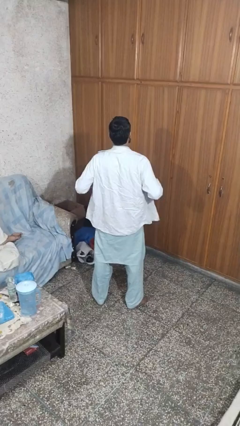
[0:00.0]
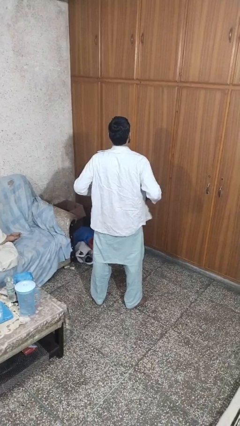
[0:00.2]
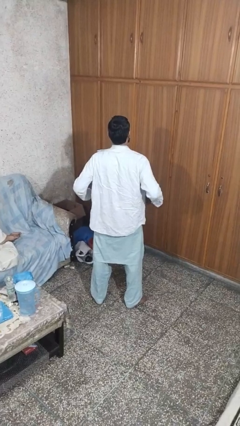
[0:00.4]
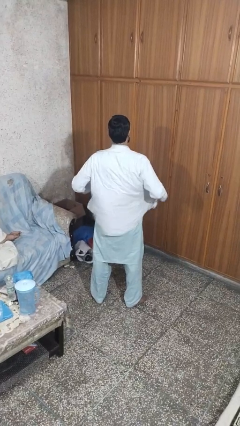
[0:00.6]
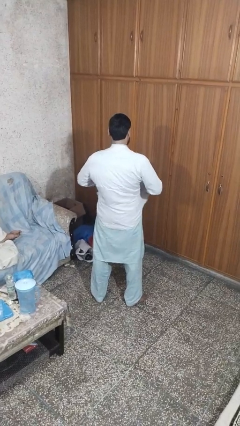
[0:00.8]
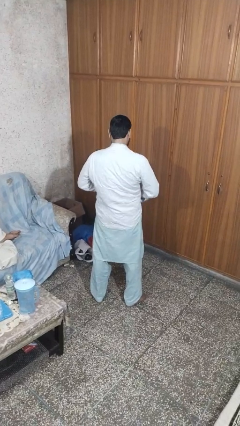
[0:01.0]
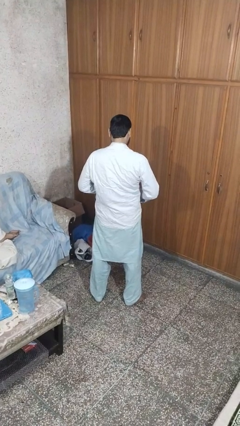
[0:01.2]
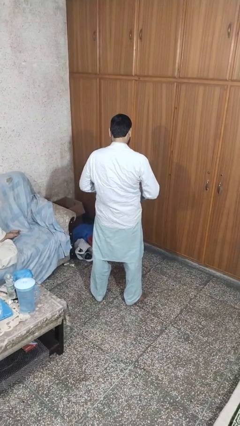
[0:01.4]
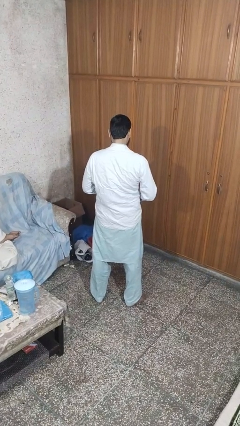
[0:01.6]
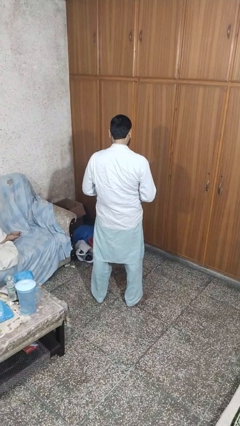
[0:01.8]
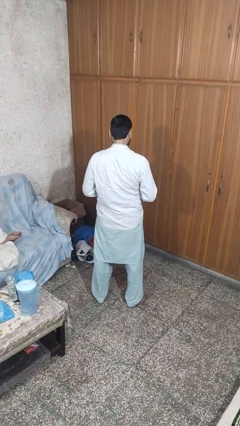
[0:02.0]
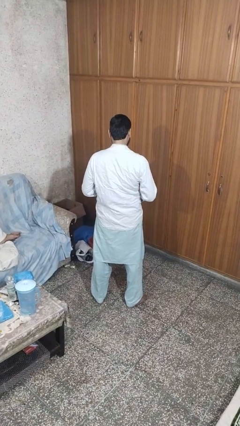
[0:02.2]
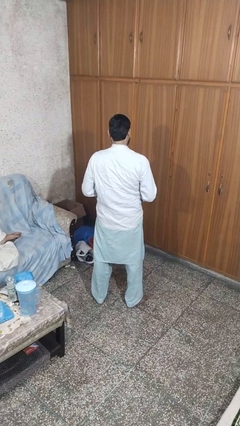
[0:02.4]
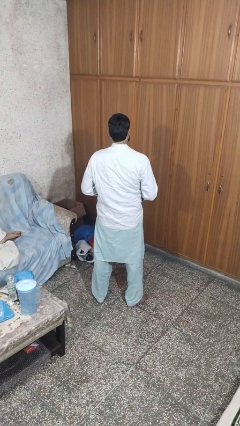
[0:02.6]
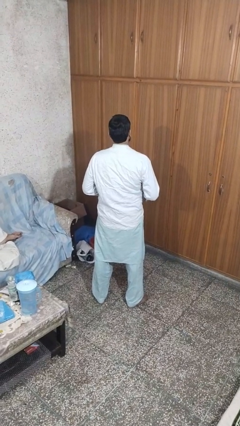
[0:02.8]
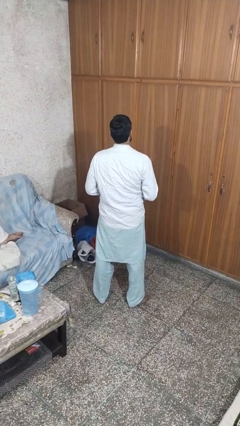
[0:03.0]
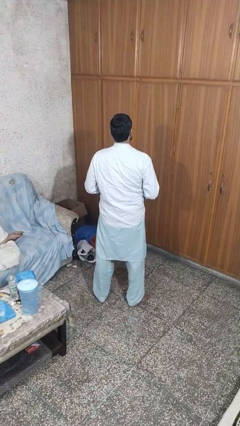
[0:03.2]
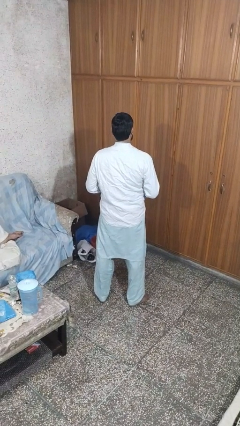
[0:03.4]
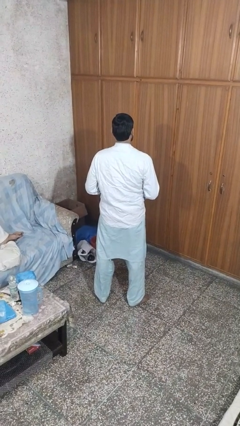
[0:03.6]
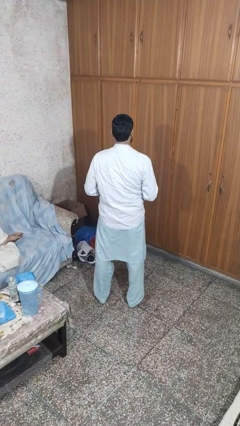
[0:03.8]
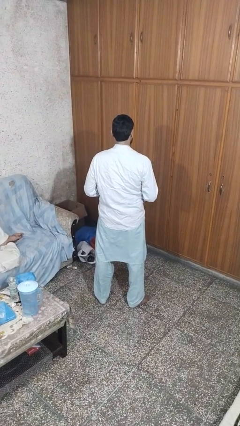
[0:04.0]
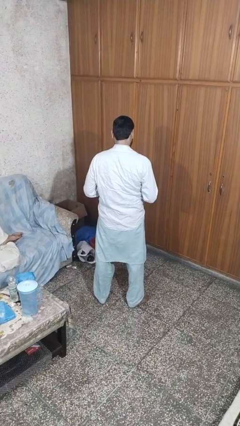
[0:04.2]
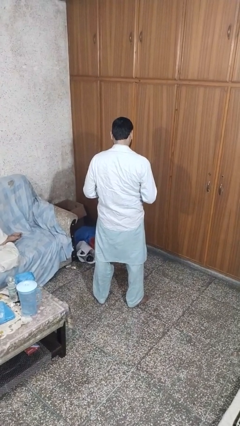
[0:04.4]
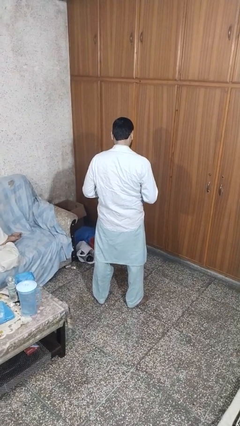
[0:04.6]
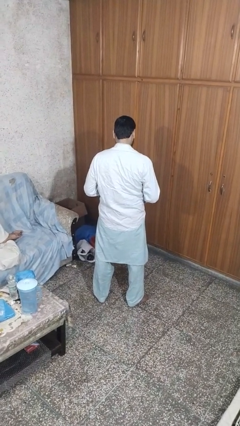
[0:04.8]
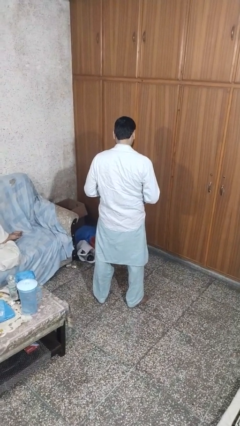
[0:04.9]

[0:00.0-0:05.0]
person buttons shirt

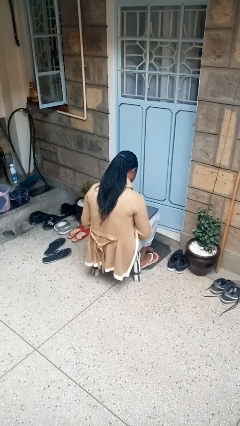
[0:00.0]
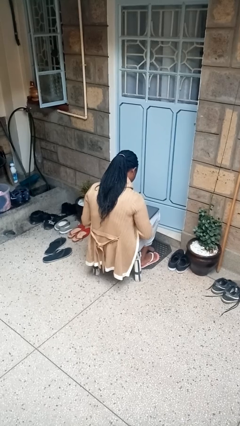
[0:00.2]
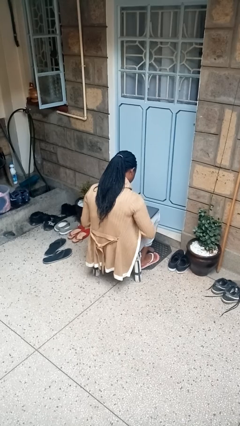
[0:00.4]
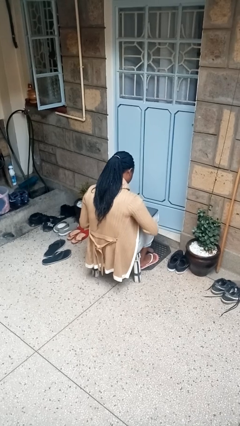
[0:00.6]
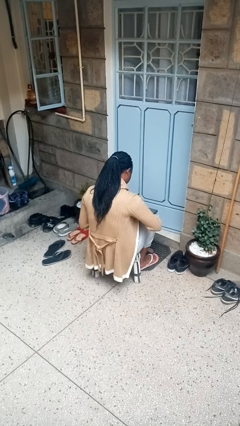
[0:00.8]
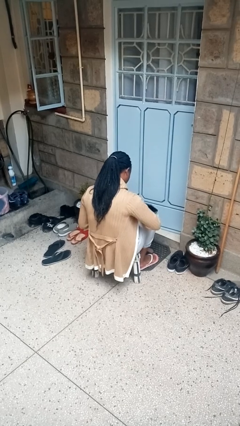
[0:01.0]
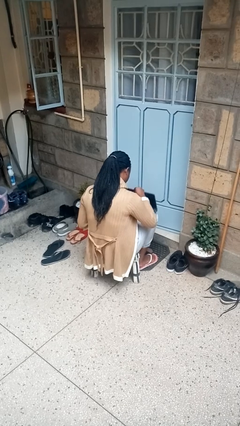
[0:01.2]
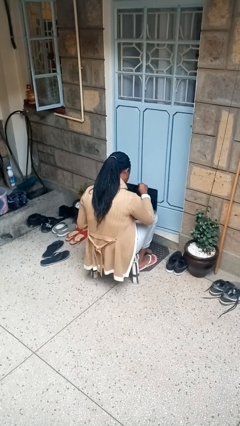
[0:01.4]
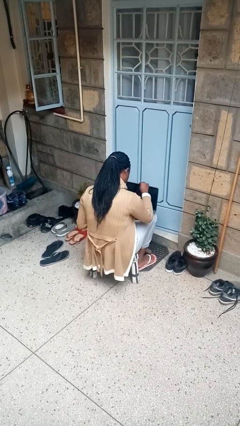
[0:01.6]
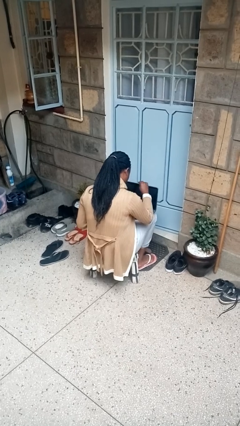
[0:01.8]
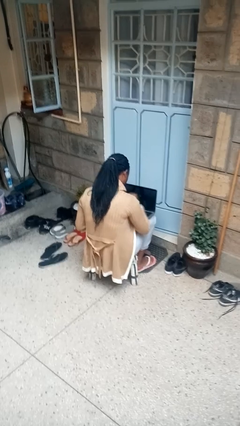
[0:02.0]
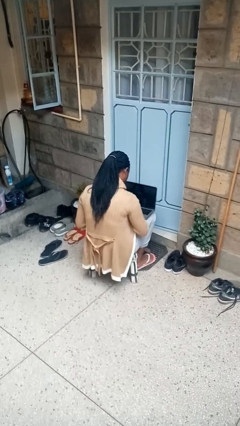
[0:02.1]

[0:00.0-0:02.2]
person opens laptop

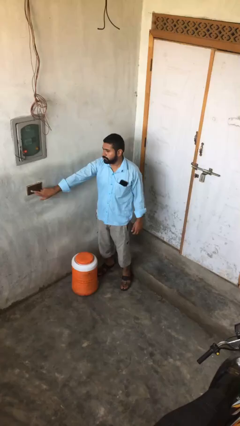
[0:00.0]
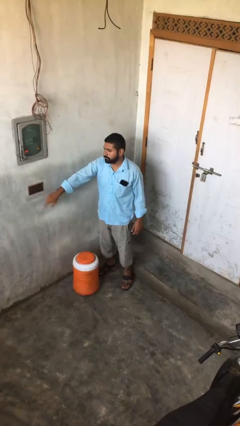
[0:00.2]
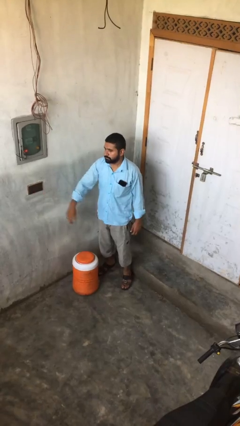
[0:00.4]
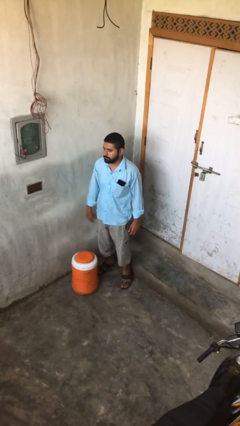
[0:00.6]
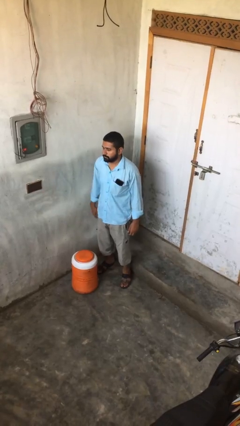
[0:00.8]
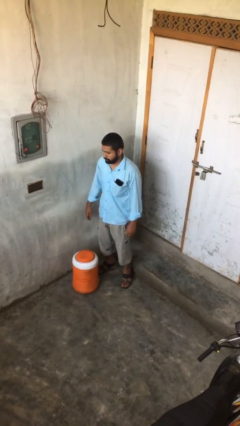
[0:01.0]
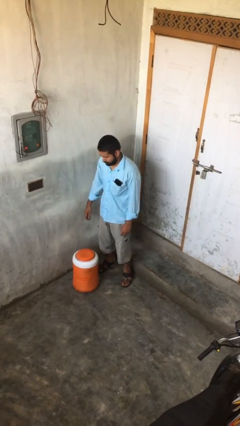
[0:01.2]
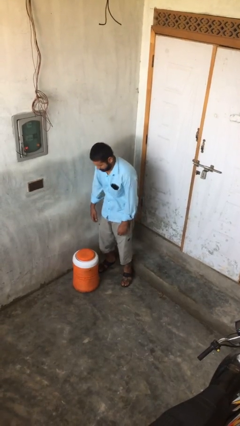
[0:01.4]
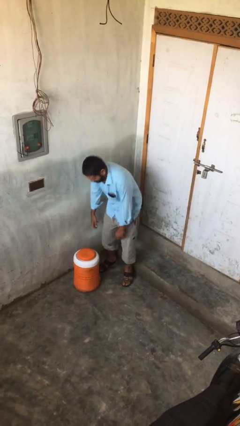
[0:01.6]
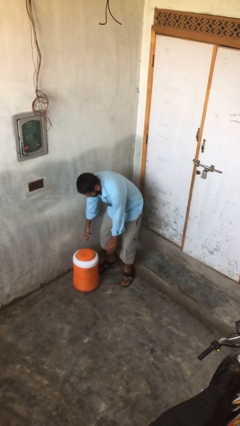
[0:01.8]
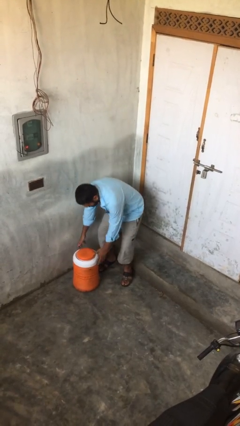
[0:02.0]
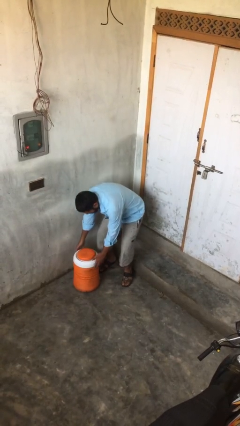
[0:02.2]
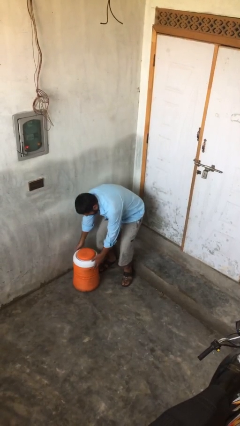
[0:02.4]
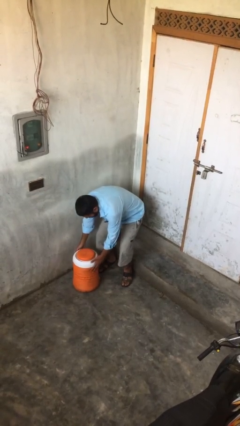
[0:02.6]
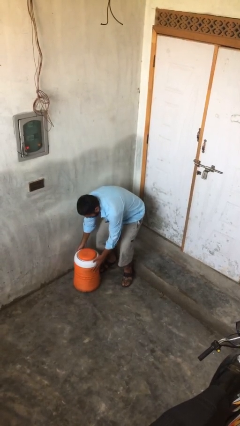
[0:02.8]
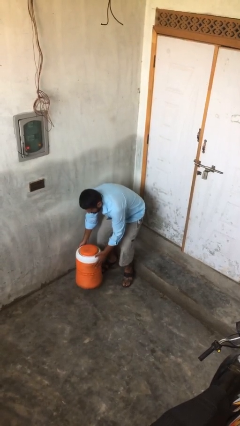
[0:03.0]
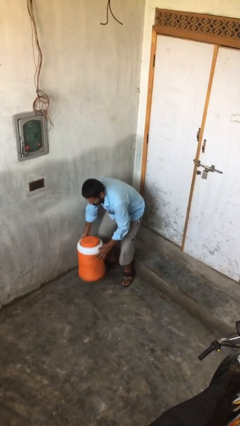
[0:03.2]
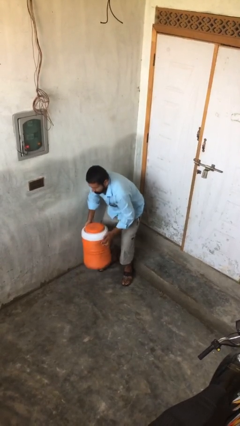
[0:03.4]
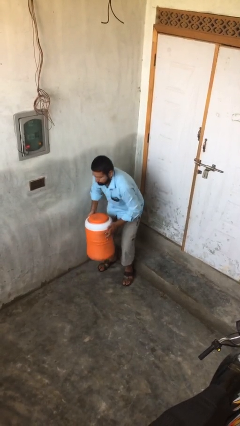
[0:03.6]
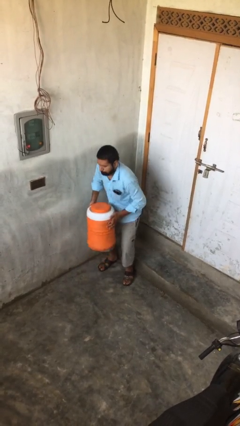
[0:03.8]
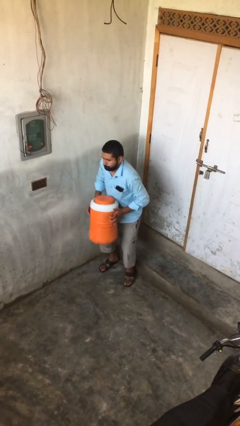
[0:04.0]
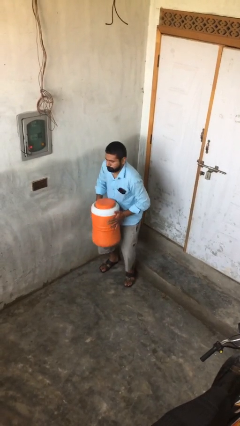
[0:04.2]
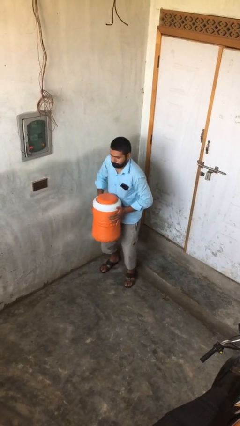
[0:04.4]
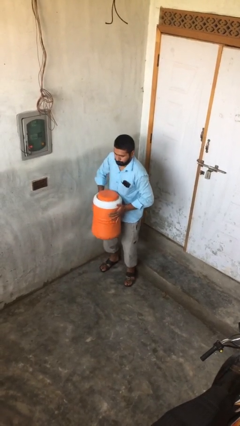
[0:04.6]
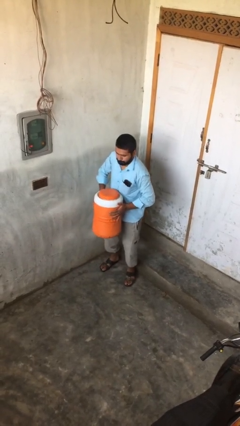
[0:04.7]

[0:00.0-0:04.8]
person picks up object from floor

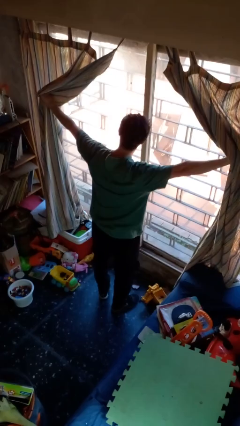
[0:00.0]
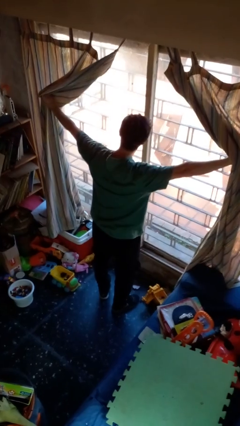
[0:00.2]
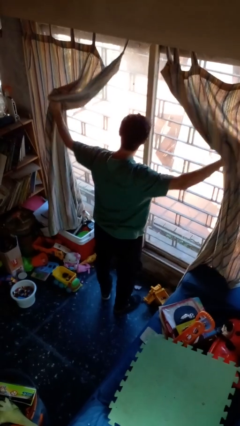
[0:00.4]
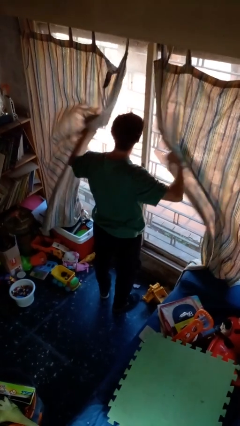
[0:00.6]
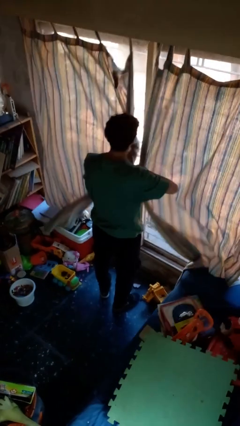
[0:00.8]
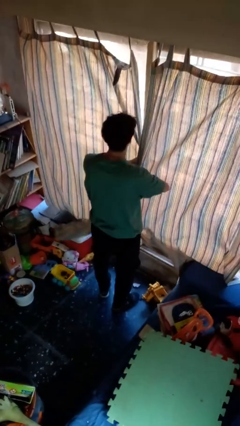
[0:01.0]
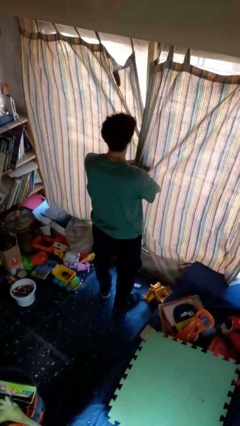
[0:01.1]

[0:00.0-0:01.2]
person closes curtains

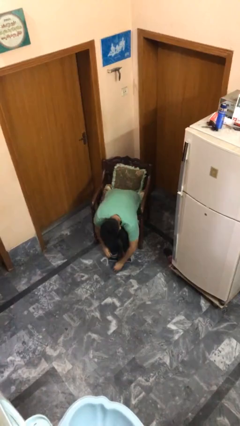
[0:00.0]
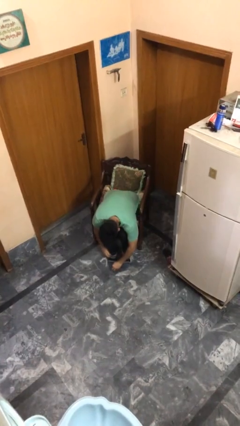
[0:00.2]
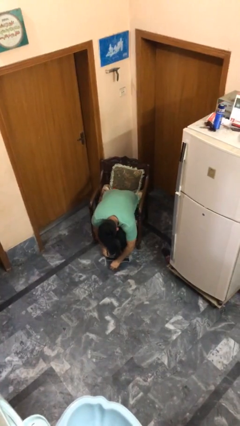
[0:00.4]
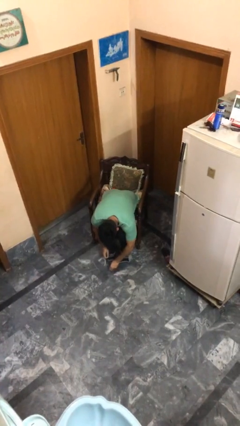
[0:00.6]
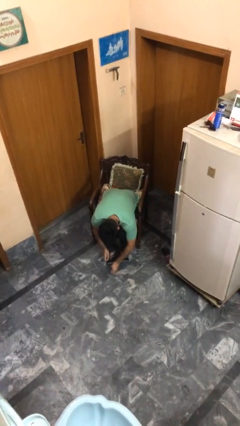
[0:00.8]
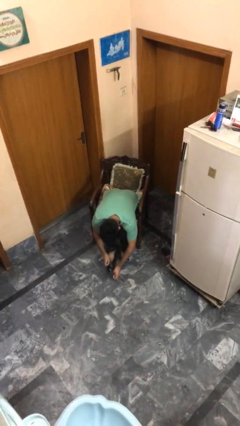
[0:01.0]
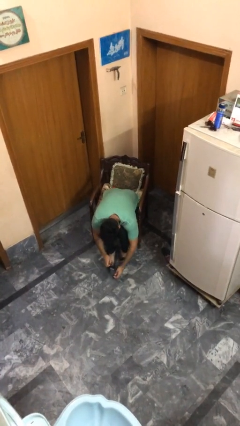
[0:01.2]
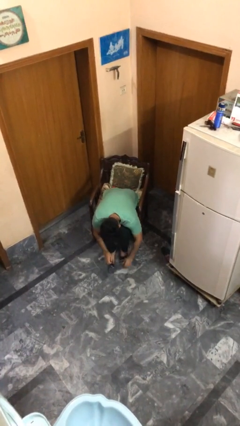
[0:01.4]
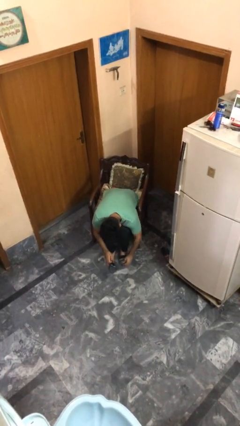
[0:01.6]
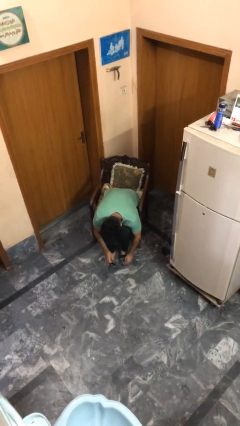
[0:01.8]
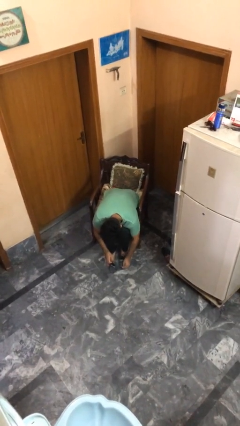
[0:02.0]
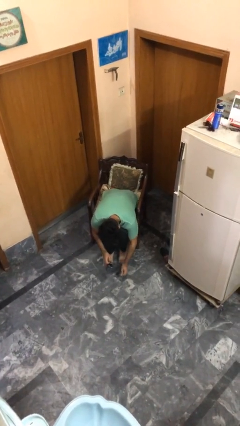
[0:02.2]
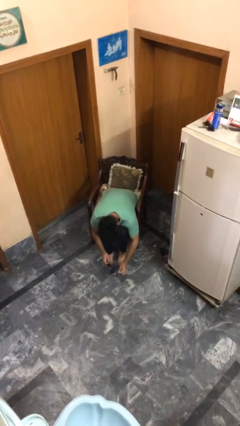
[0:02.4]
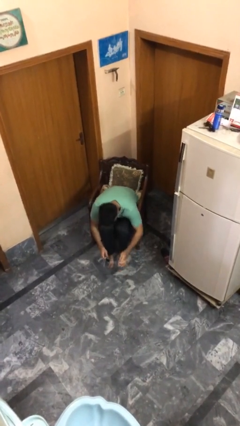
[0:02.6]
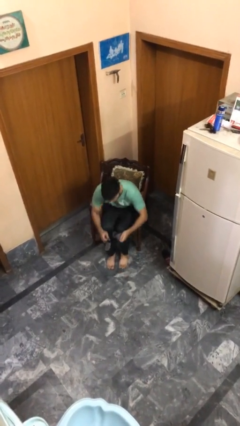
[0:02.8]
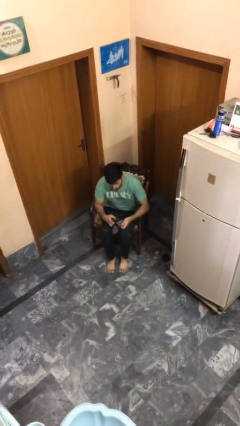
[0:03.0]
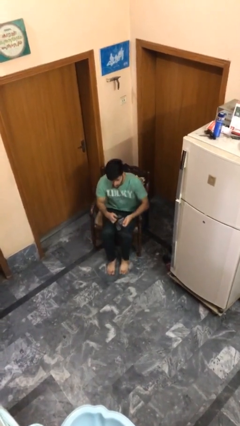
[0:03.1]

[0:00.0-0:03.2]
person takes off socks

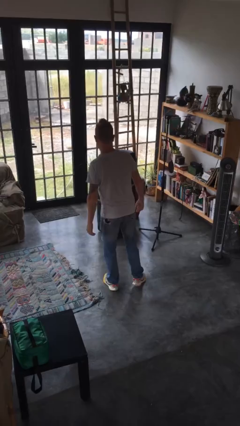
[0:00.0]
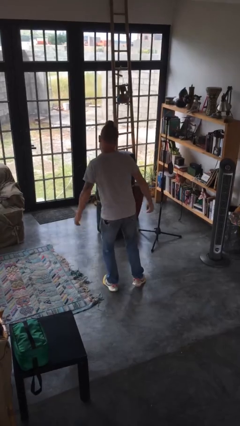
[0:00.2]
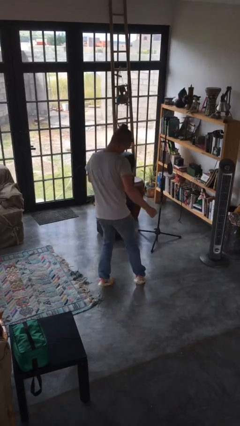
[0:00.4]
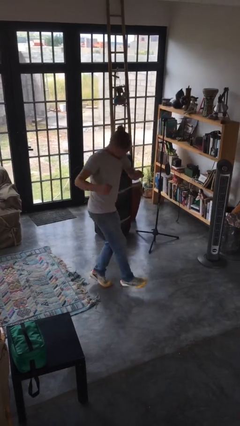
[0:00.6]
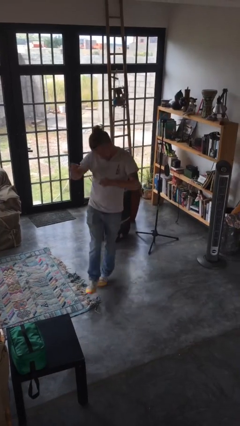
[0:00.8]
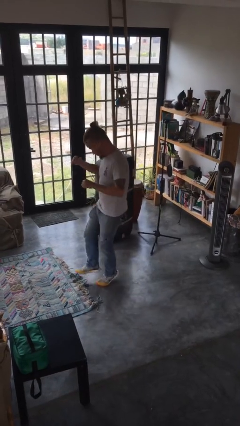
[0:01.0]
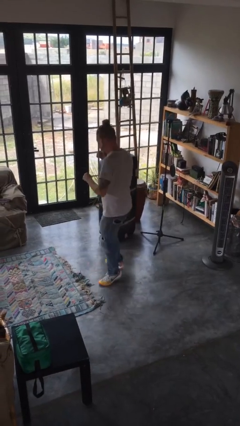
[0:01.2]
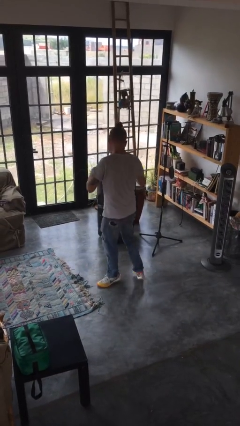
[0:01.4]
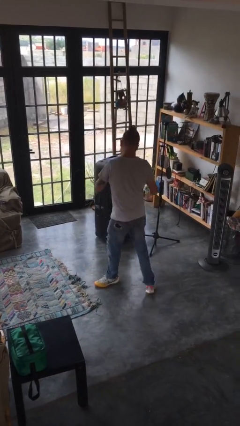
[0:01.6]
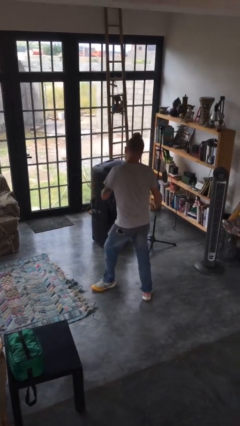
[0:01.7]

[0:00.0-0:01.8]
person twirls
